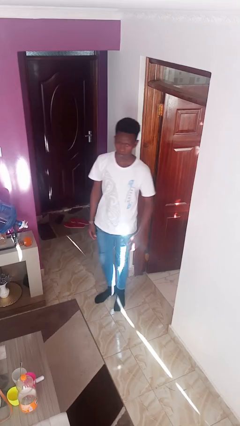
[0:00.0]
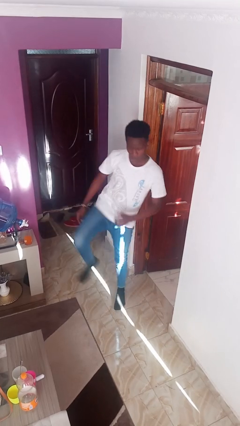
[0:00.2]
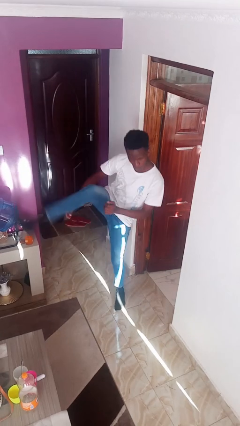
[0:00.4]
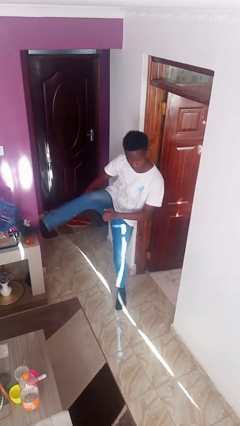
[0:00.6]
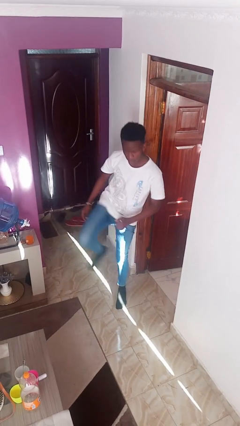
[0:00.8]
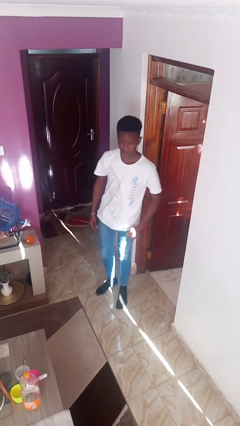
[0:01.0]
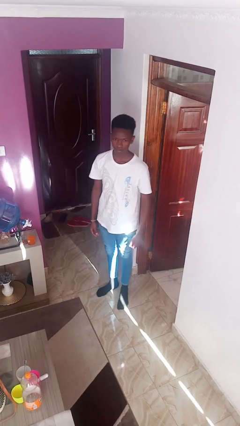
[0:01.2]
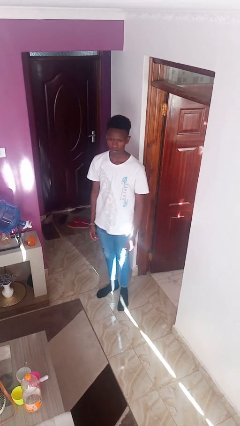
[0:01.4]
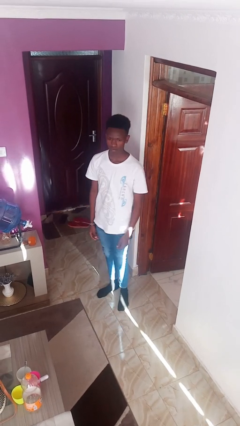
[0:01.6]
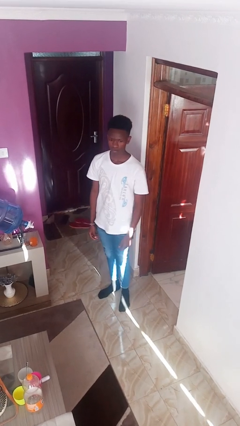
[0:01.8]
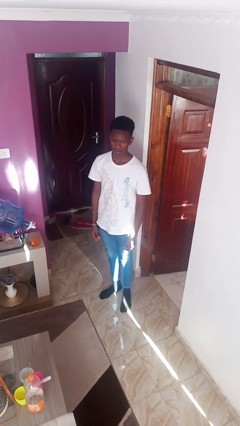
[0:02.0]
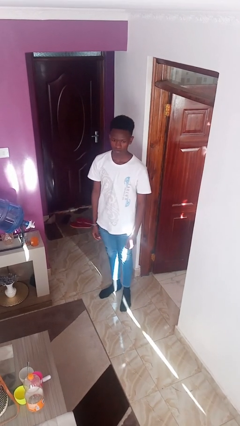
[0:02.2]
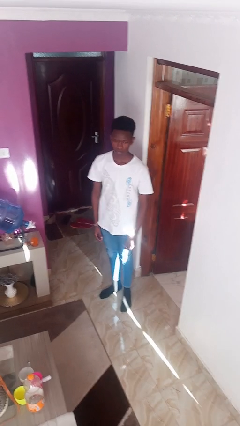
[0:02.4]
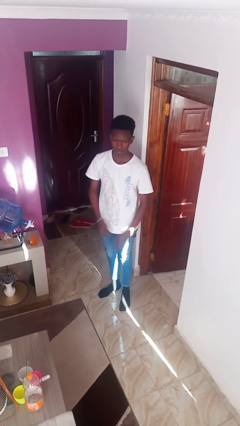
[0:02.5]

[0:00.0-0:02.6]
person karate kicks

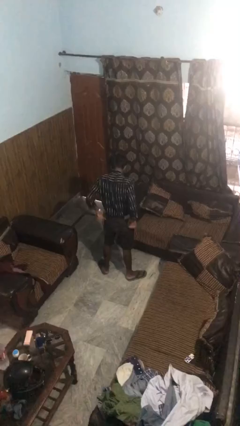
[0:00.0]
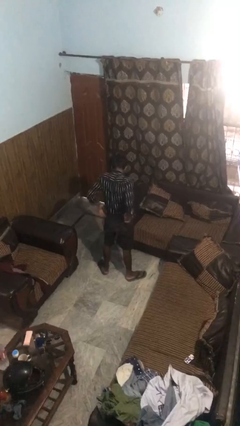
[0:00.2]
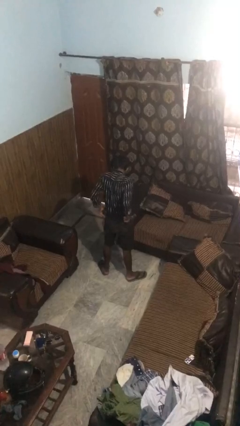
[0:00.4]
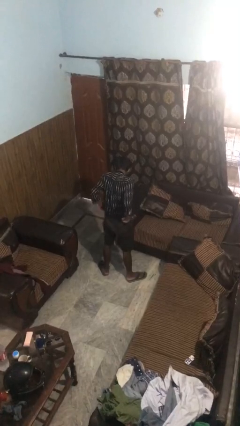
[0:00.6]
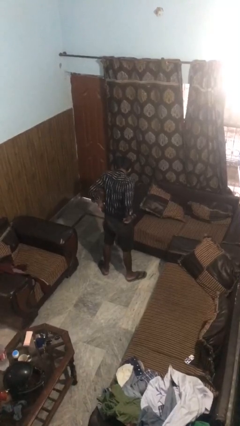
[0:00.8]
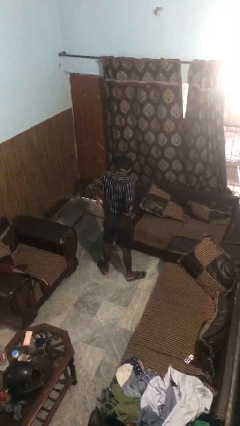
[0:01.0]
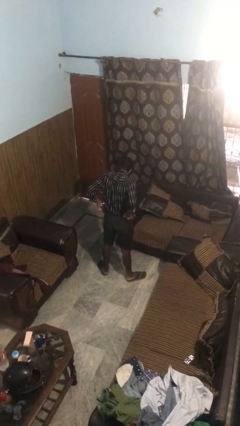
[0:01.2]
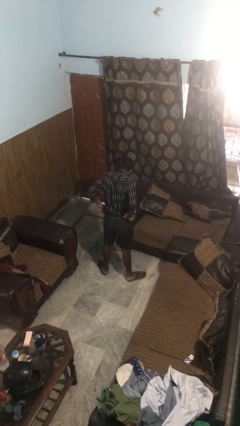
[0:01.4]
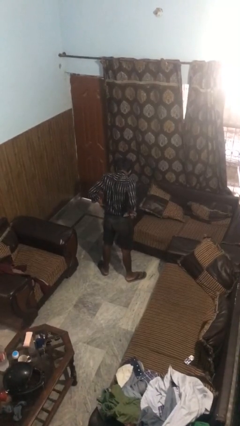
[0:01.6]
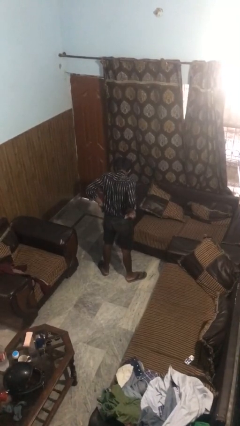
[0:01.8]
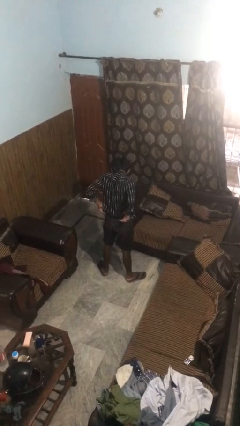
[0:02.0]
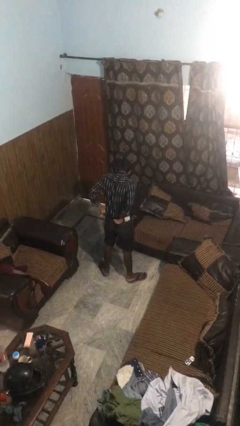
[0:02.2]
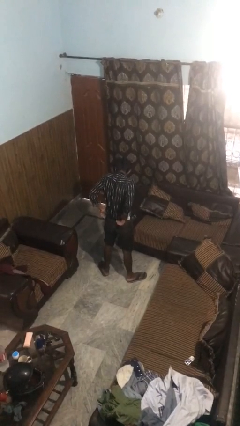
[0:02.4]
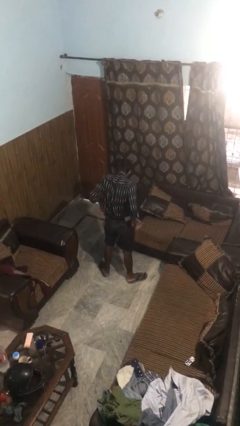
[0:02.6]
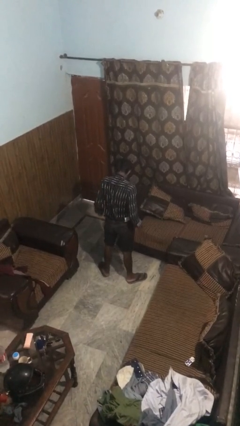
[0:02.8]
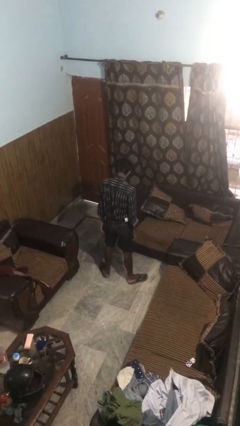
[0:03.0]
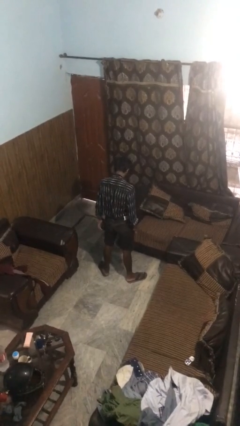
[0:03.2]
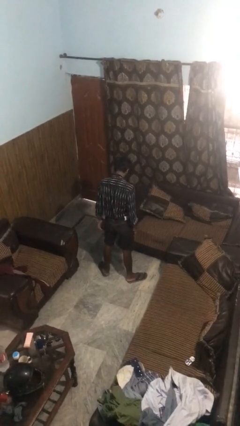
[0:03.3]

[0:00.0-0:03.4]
person hikes up pants

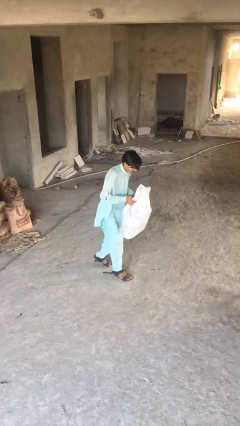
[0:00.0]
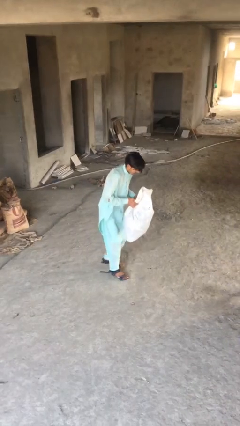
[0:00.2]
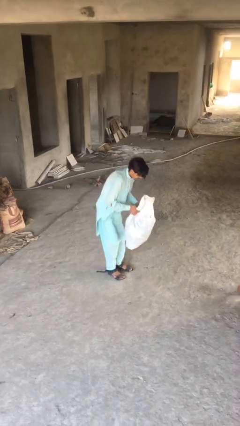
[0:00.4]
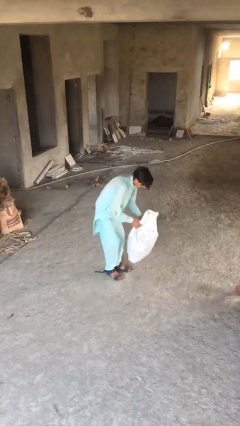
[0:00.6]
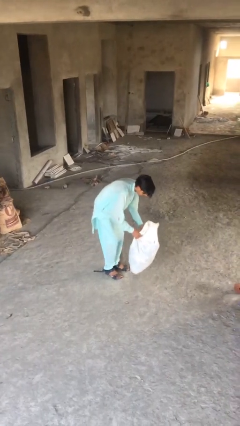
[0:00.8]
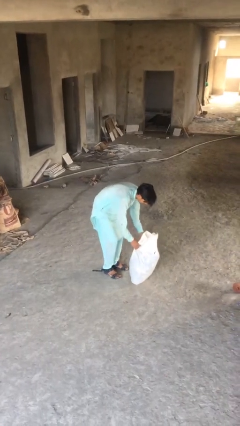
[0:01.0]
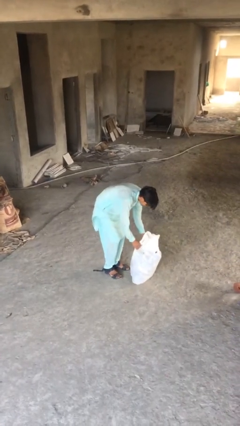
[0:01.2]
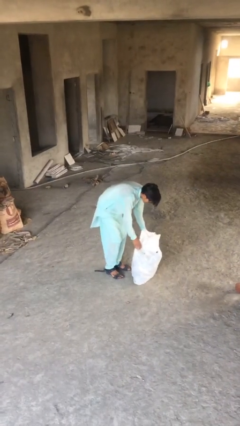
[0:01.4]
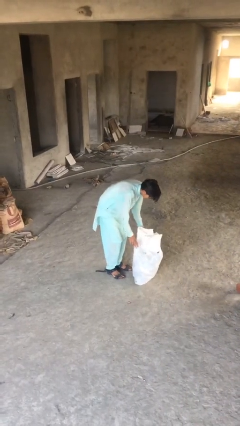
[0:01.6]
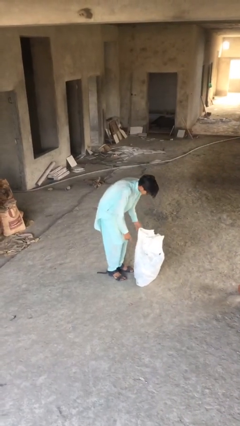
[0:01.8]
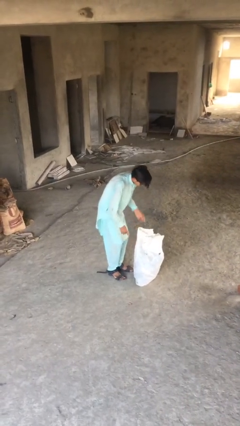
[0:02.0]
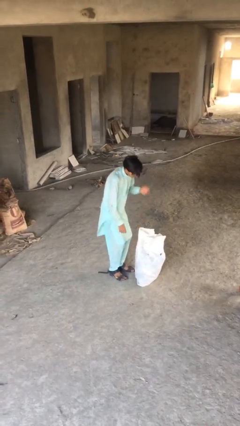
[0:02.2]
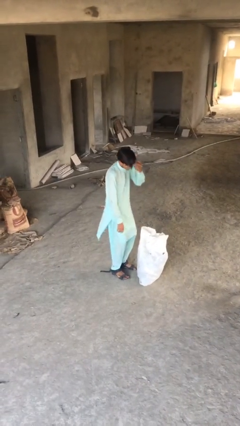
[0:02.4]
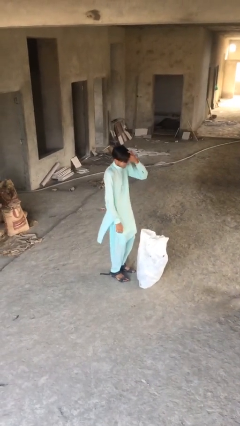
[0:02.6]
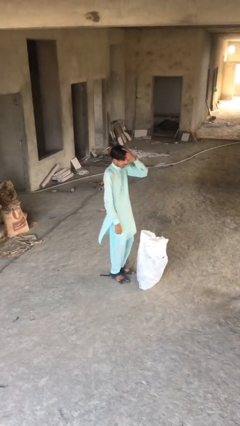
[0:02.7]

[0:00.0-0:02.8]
person puts down object on floor

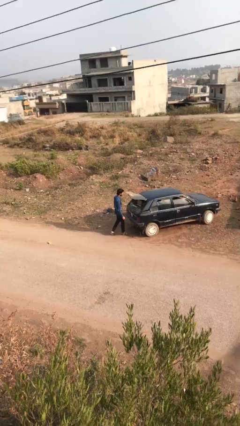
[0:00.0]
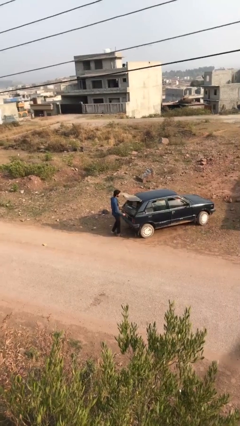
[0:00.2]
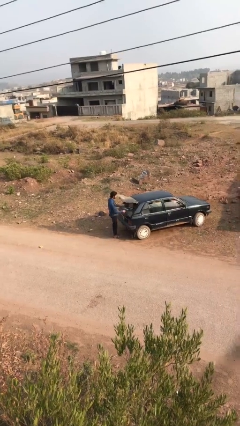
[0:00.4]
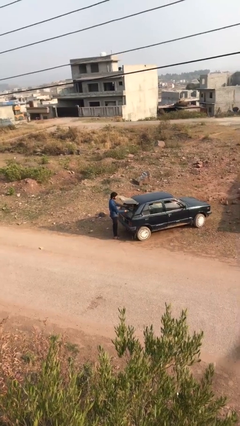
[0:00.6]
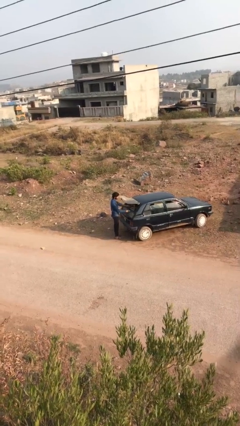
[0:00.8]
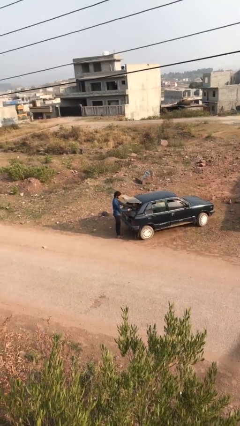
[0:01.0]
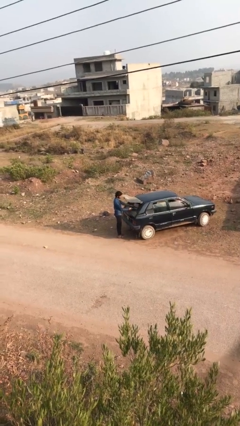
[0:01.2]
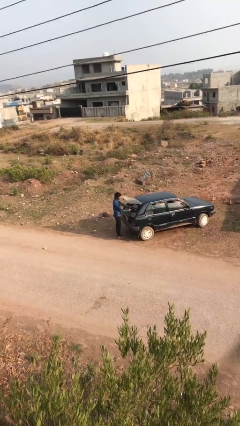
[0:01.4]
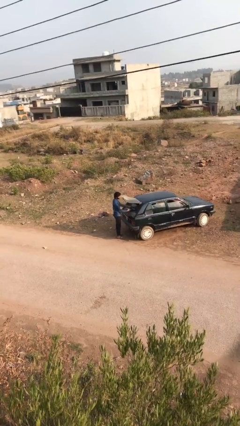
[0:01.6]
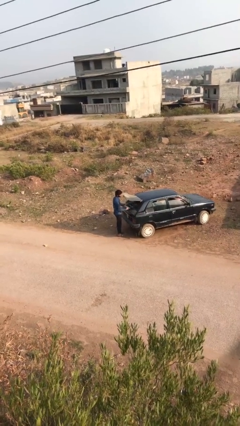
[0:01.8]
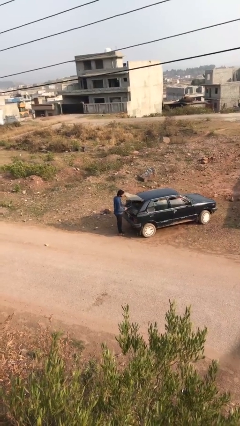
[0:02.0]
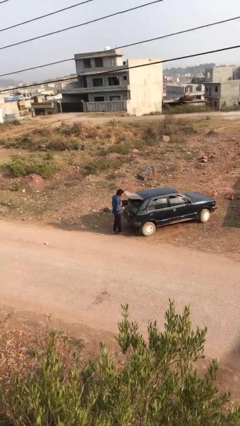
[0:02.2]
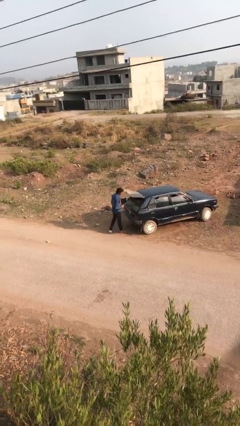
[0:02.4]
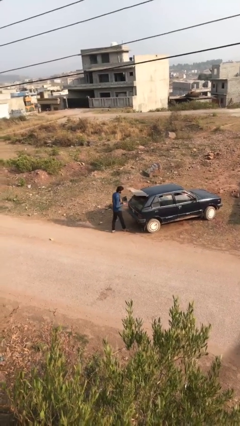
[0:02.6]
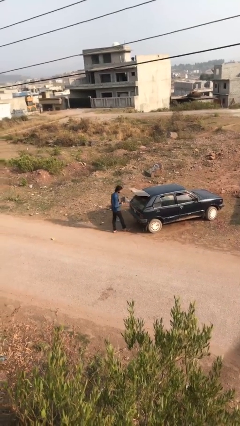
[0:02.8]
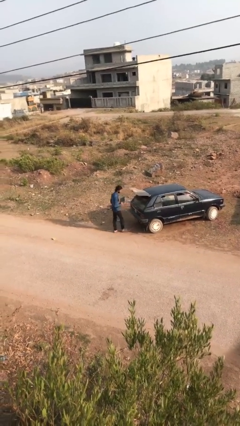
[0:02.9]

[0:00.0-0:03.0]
person unloads car

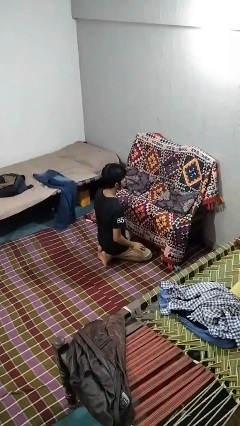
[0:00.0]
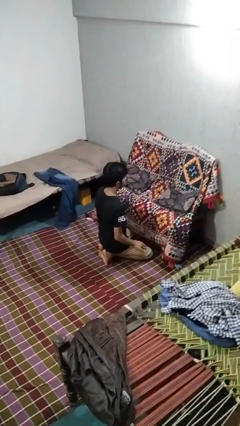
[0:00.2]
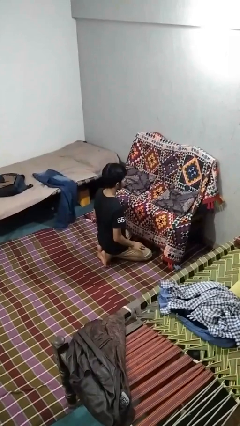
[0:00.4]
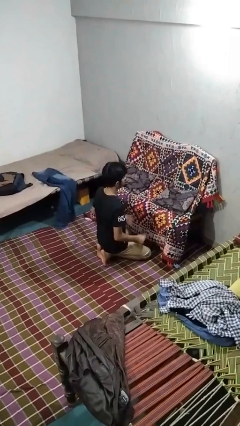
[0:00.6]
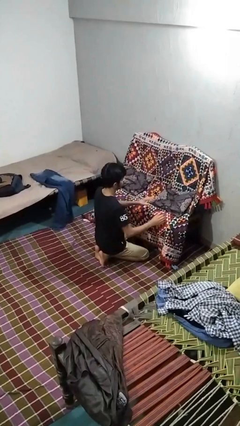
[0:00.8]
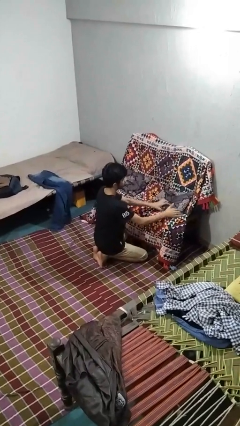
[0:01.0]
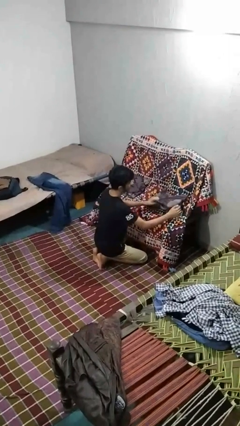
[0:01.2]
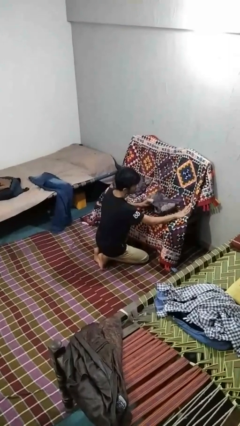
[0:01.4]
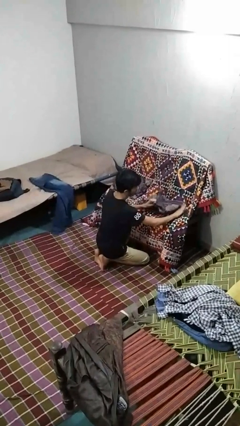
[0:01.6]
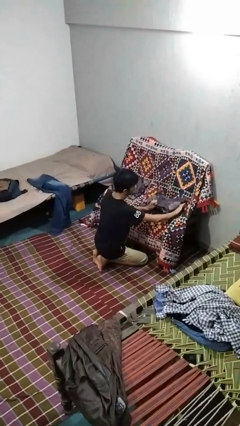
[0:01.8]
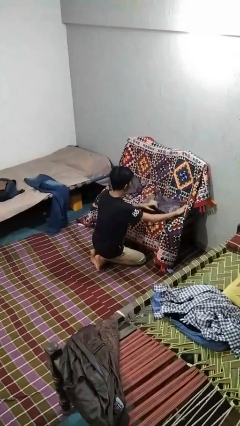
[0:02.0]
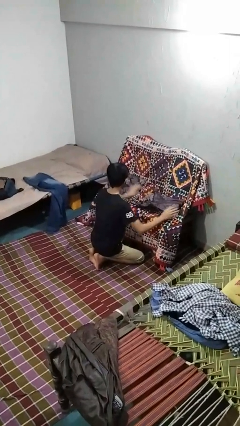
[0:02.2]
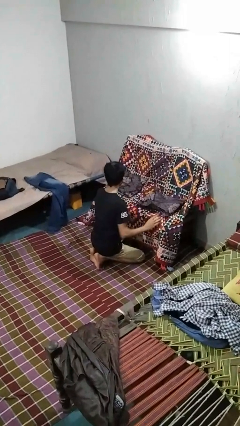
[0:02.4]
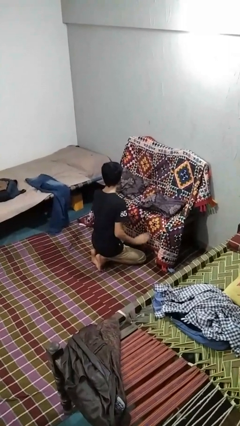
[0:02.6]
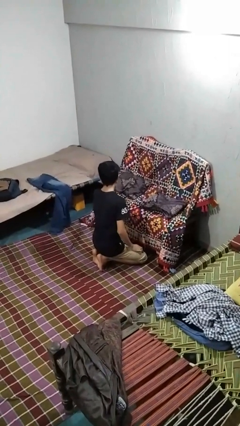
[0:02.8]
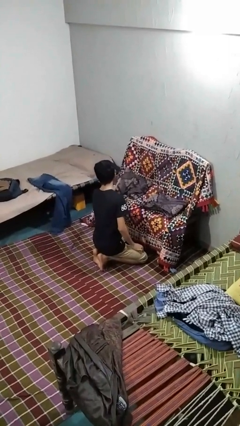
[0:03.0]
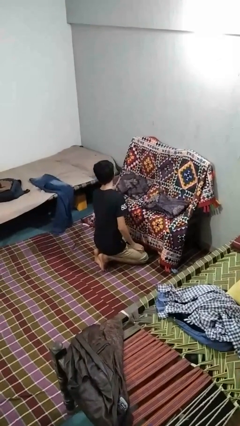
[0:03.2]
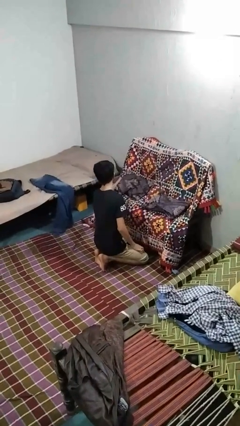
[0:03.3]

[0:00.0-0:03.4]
person searches in couch

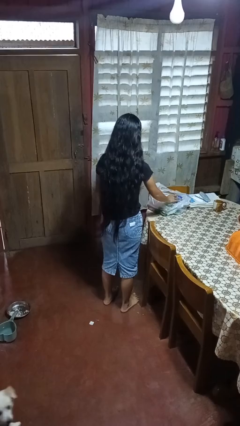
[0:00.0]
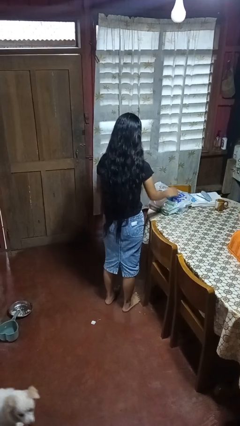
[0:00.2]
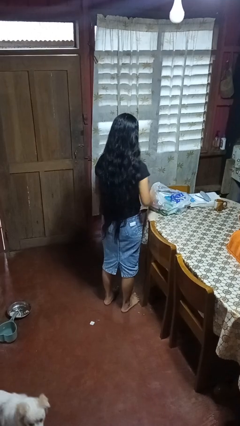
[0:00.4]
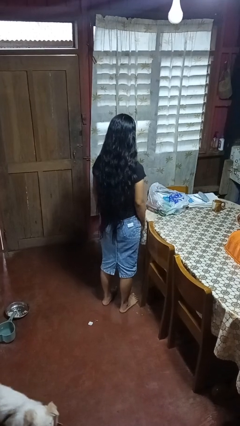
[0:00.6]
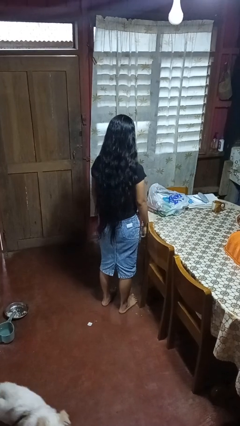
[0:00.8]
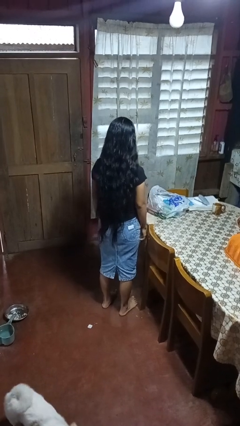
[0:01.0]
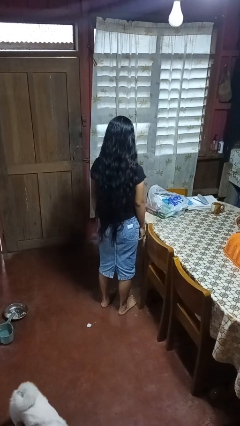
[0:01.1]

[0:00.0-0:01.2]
person puts object into bag

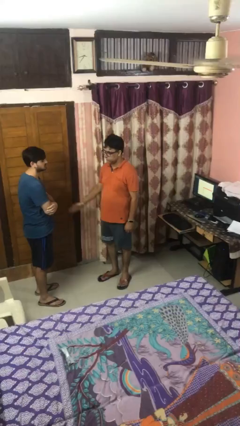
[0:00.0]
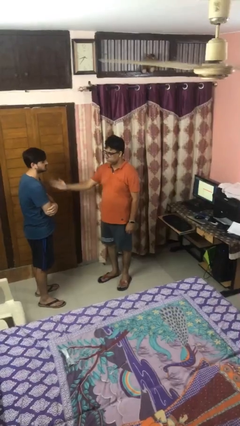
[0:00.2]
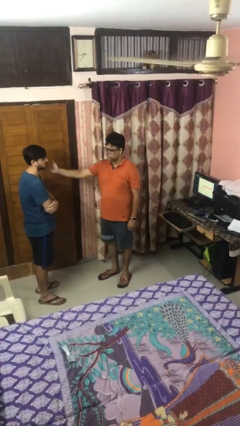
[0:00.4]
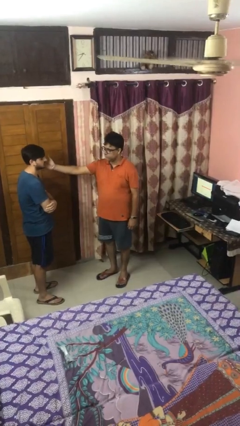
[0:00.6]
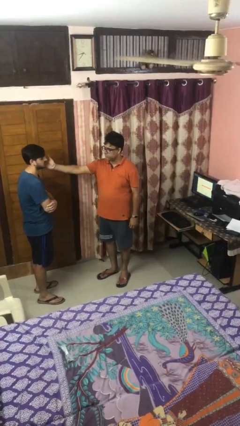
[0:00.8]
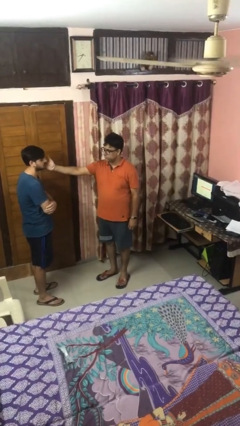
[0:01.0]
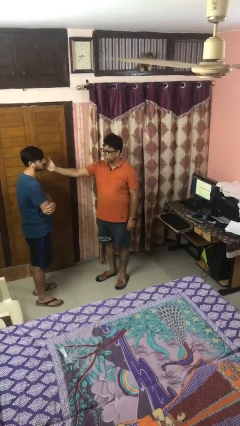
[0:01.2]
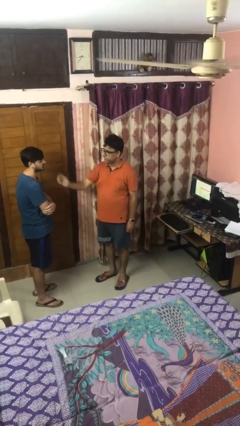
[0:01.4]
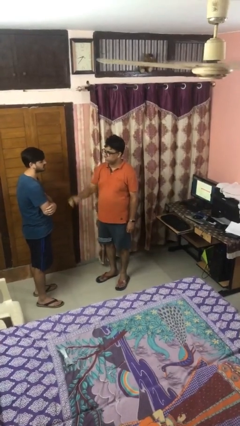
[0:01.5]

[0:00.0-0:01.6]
person touches face of person
